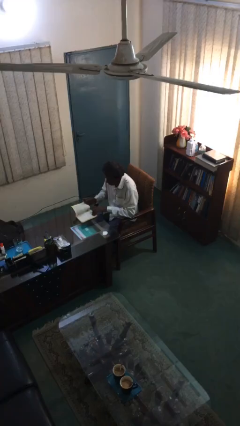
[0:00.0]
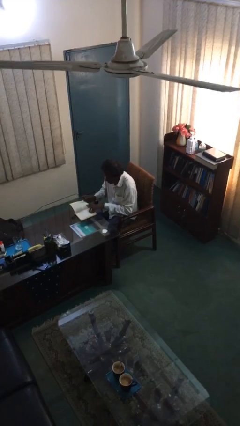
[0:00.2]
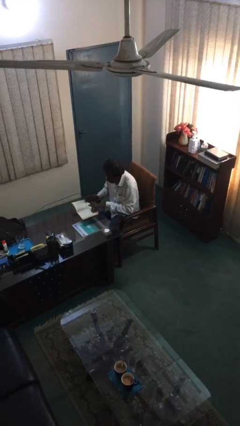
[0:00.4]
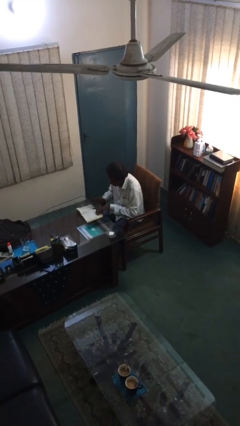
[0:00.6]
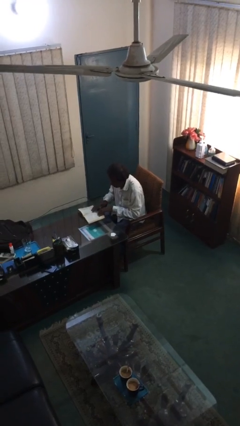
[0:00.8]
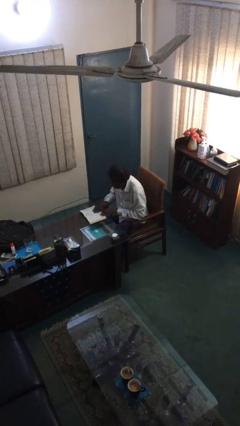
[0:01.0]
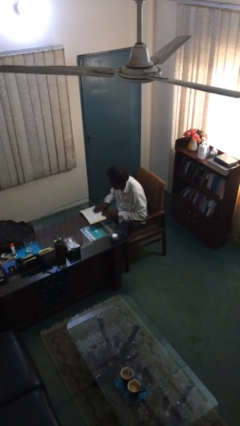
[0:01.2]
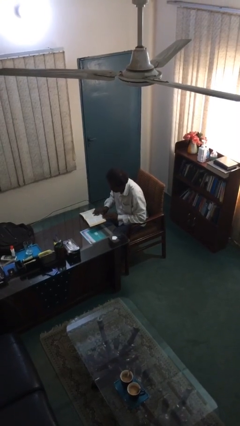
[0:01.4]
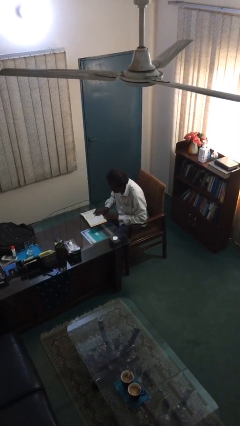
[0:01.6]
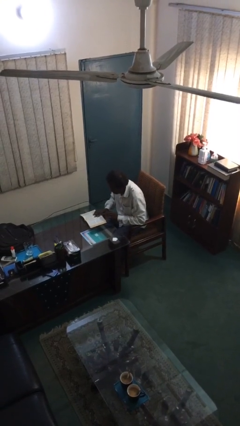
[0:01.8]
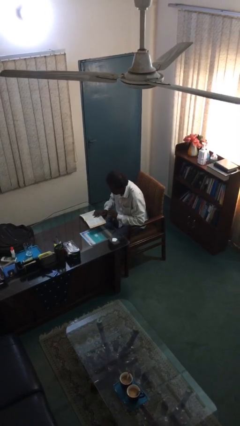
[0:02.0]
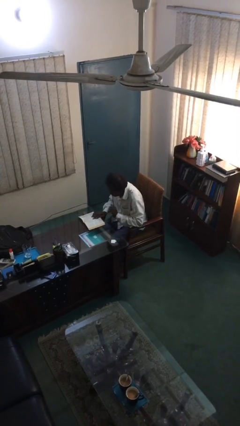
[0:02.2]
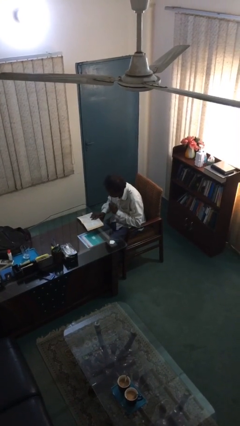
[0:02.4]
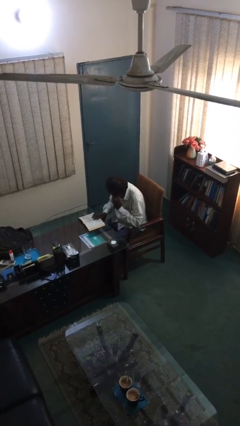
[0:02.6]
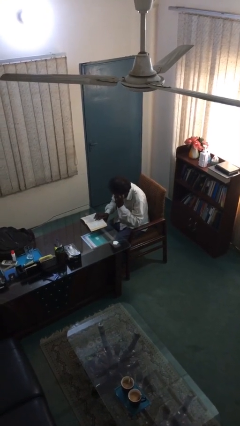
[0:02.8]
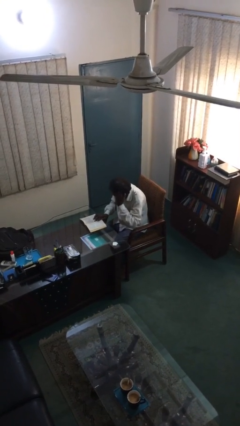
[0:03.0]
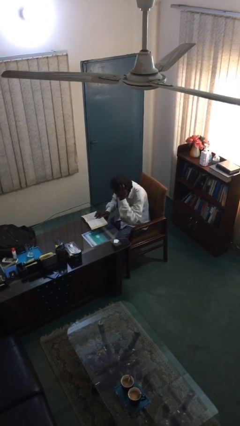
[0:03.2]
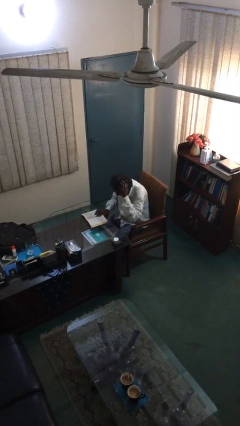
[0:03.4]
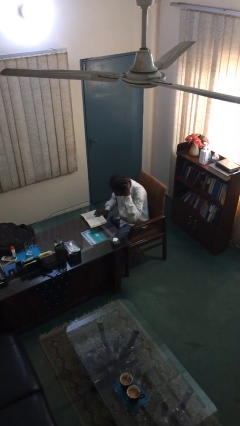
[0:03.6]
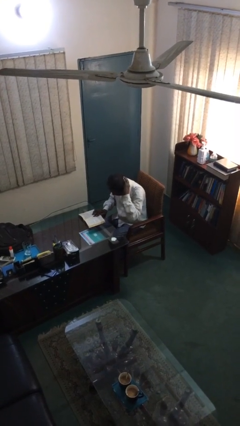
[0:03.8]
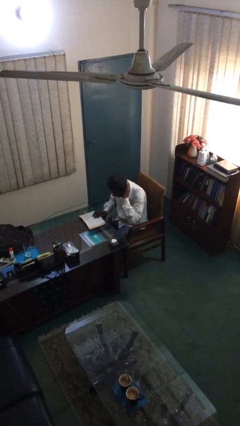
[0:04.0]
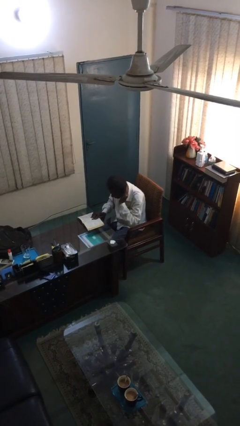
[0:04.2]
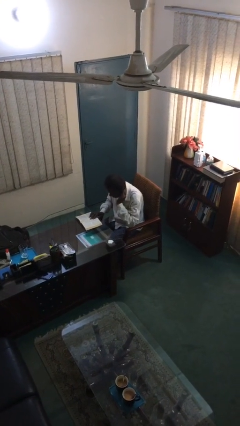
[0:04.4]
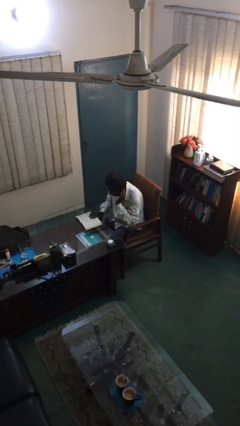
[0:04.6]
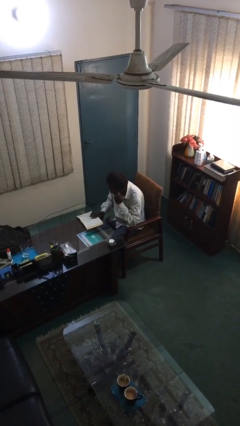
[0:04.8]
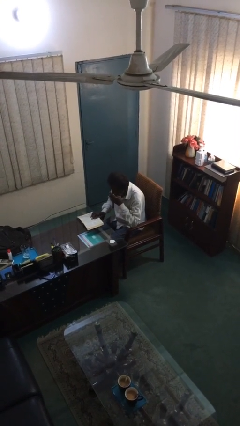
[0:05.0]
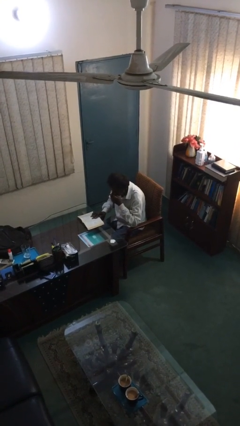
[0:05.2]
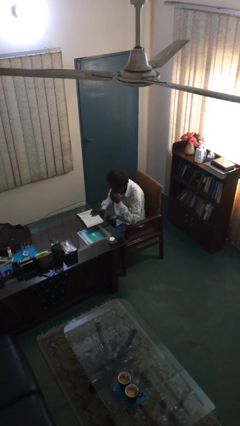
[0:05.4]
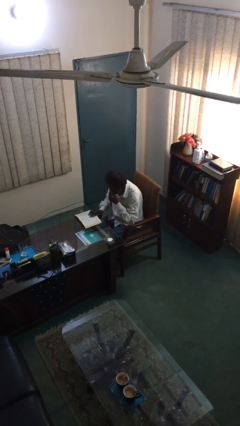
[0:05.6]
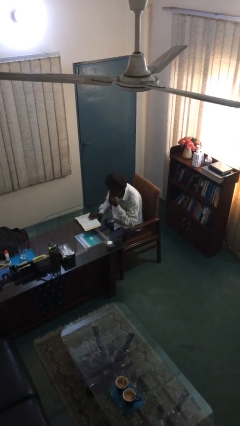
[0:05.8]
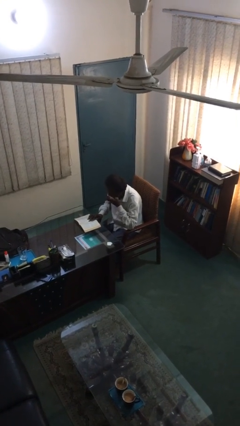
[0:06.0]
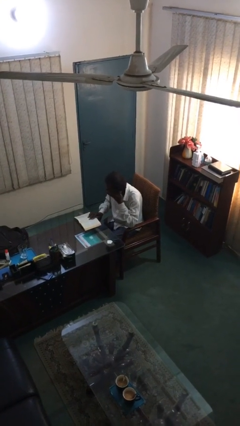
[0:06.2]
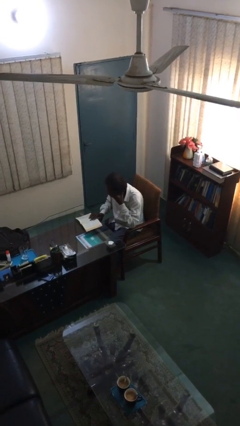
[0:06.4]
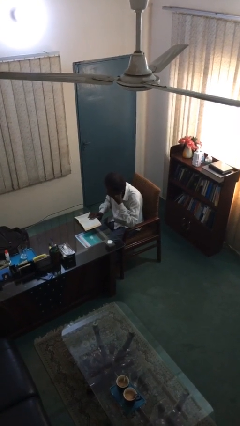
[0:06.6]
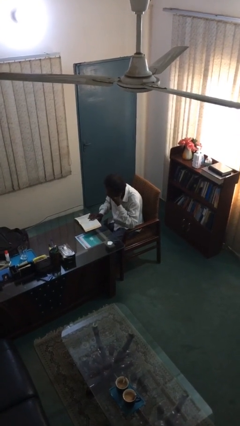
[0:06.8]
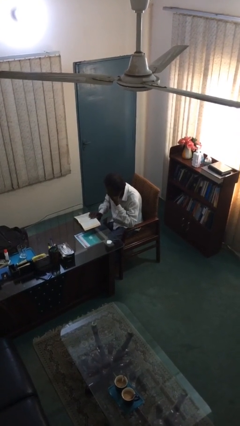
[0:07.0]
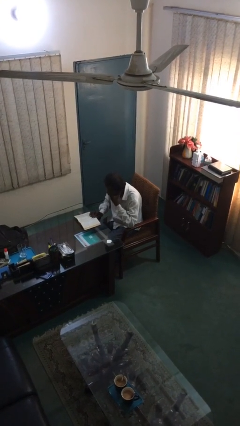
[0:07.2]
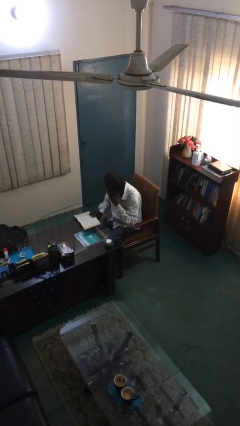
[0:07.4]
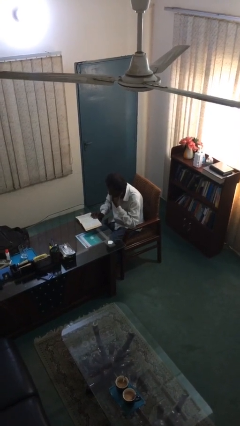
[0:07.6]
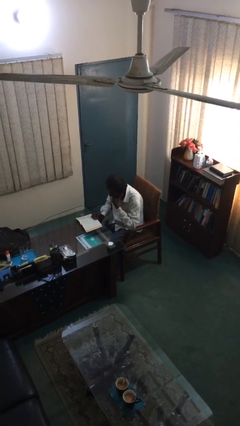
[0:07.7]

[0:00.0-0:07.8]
person reads document

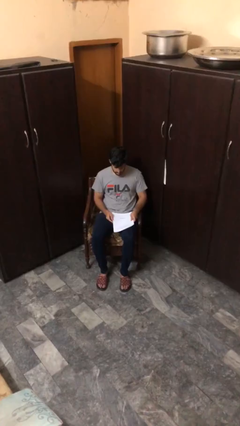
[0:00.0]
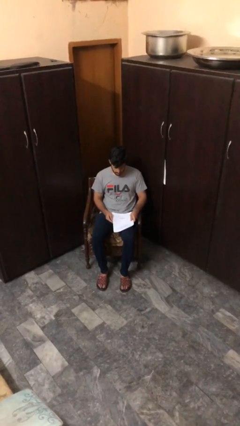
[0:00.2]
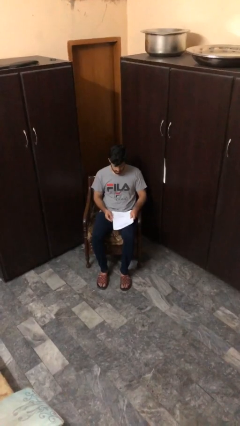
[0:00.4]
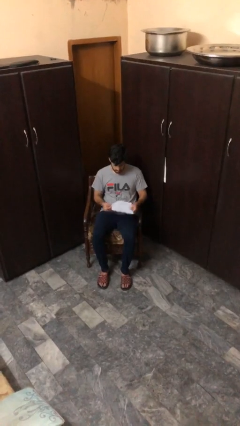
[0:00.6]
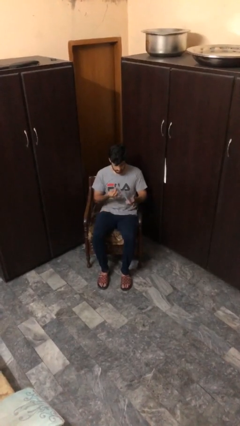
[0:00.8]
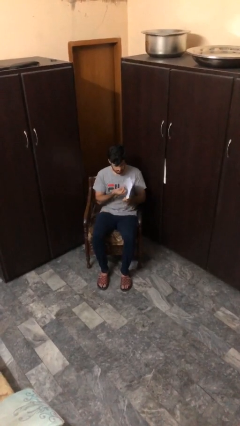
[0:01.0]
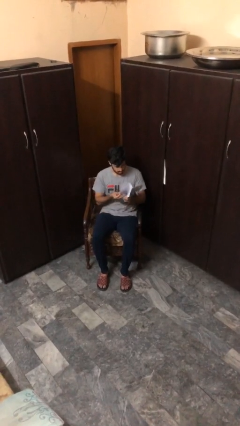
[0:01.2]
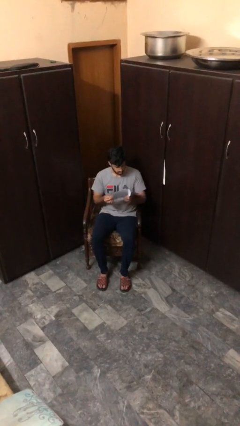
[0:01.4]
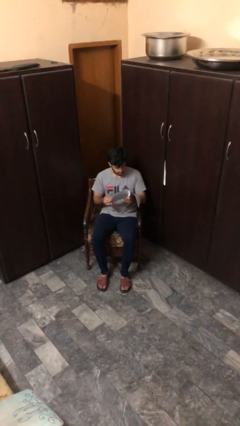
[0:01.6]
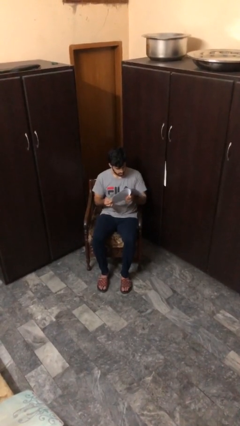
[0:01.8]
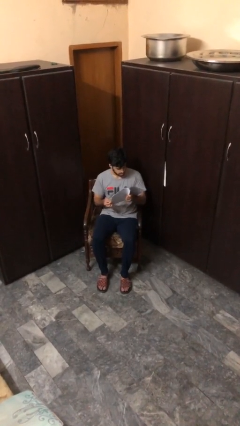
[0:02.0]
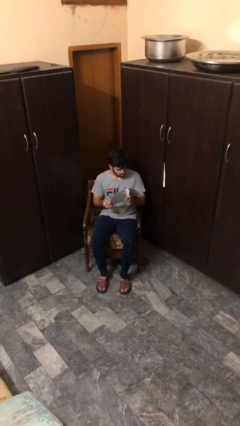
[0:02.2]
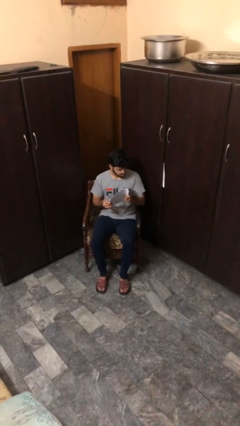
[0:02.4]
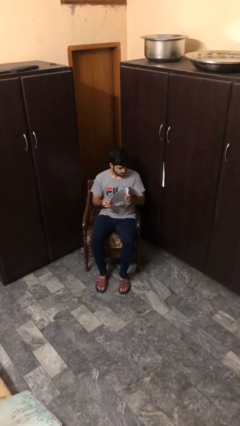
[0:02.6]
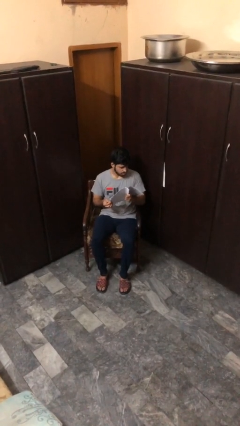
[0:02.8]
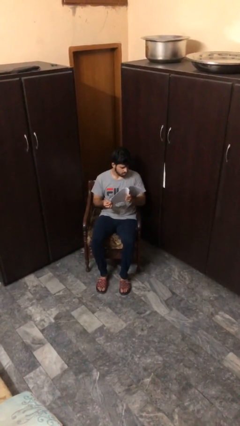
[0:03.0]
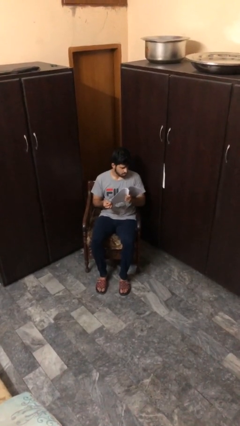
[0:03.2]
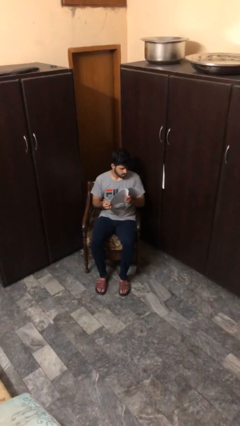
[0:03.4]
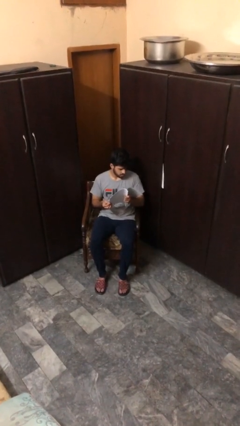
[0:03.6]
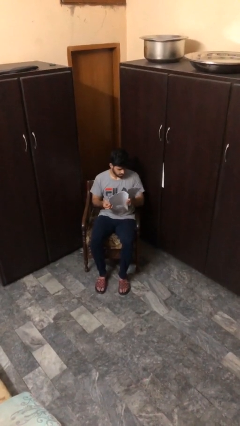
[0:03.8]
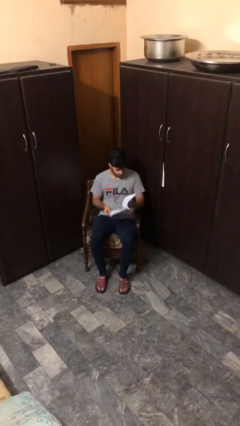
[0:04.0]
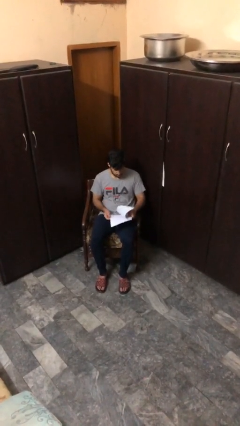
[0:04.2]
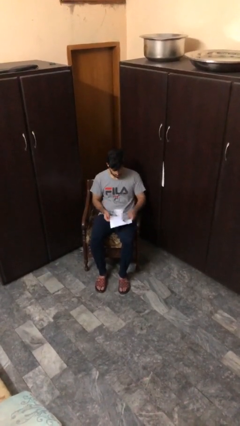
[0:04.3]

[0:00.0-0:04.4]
person reads magazine

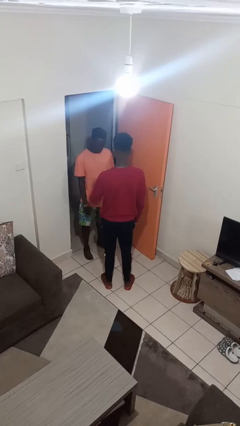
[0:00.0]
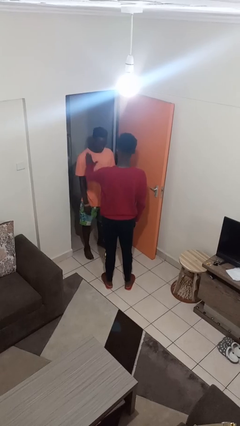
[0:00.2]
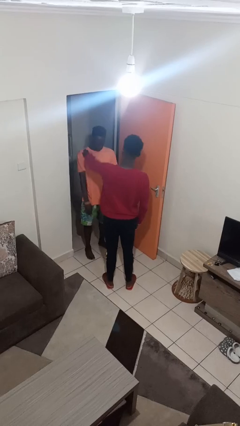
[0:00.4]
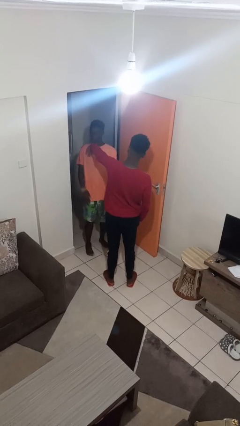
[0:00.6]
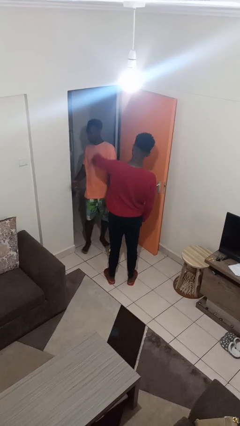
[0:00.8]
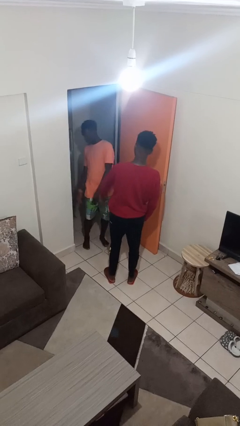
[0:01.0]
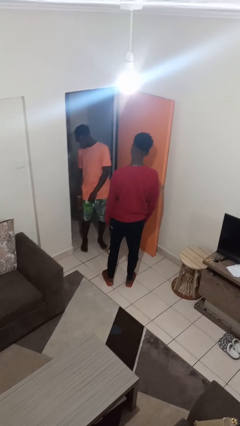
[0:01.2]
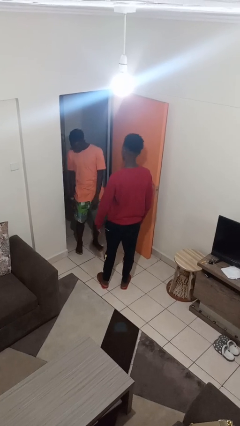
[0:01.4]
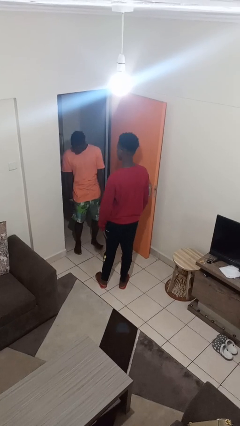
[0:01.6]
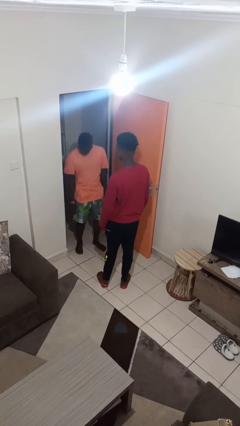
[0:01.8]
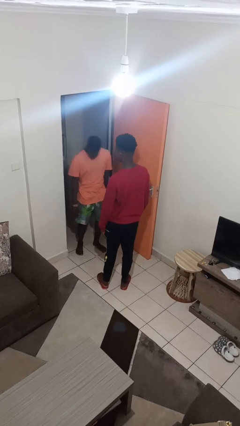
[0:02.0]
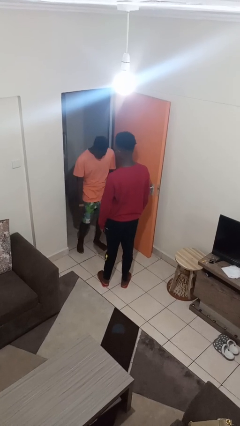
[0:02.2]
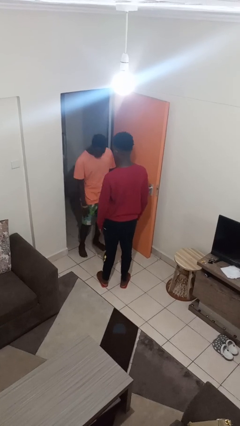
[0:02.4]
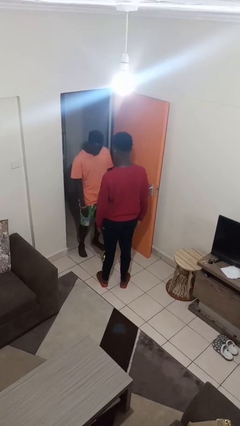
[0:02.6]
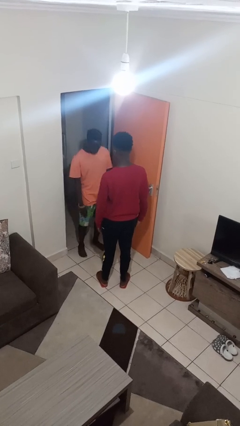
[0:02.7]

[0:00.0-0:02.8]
person shoves person

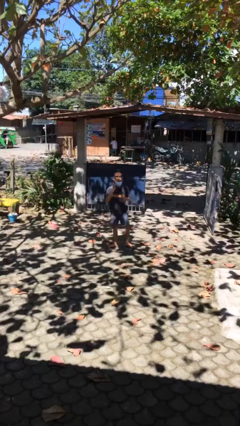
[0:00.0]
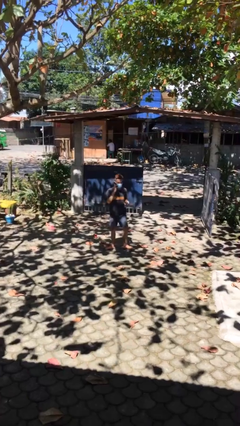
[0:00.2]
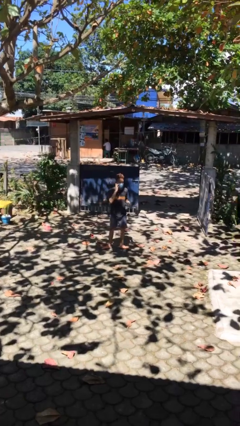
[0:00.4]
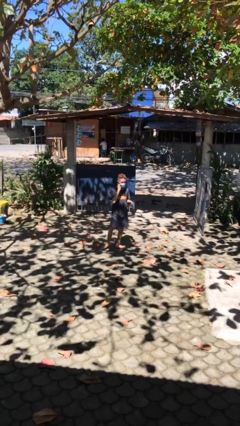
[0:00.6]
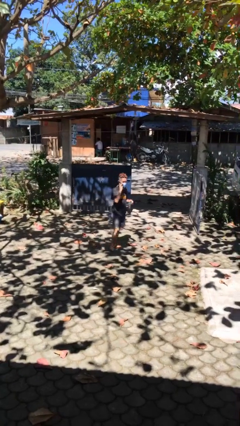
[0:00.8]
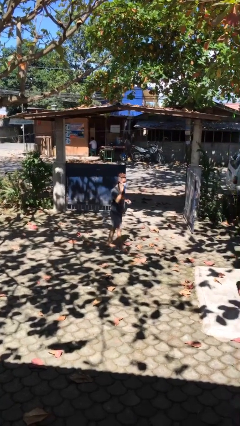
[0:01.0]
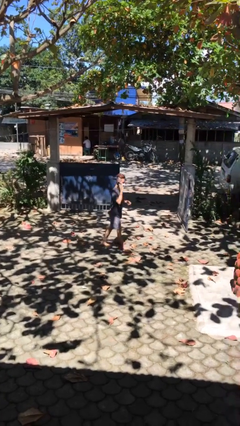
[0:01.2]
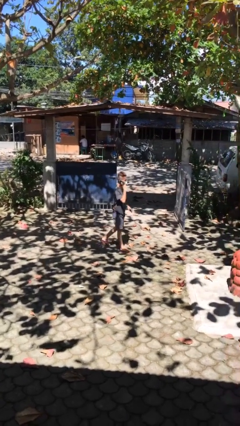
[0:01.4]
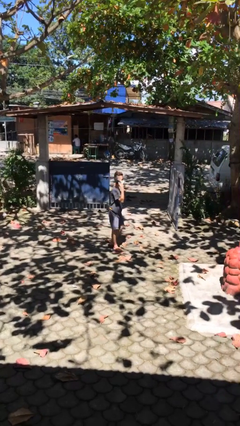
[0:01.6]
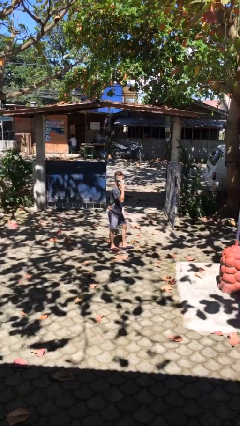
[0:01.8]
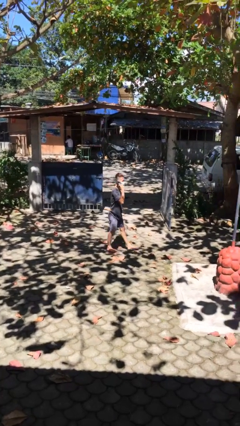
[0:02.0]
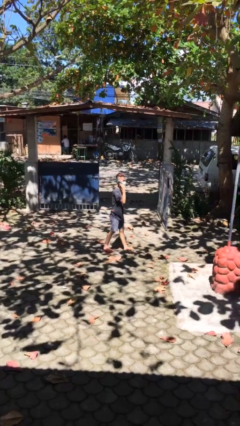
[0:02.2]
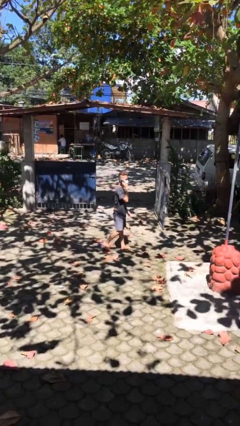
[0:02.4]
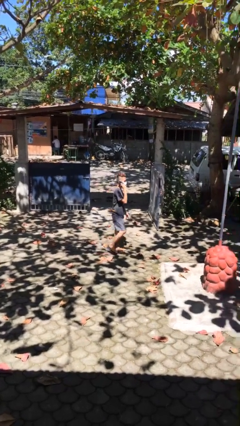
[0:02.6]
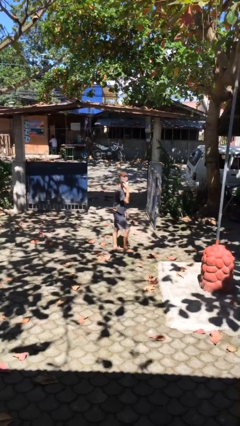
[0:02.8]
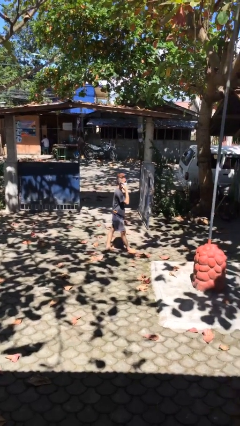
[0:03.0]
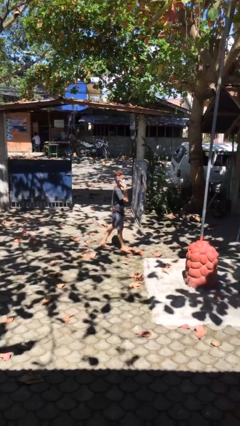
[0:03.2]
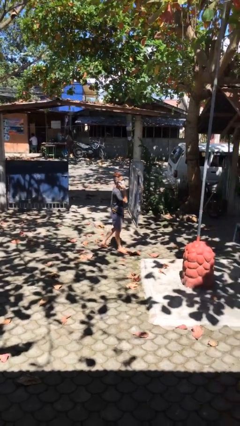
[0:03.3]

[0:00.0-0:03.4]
person talks on phone
